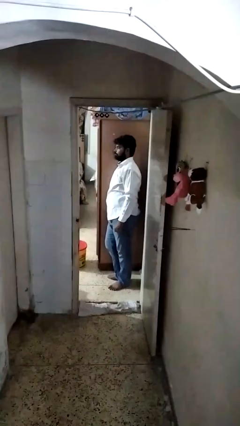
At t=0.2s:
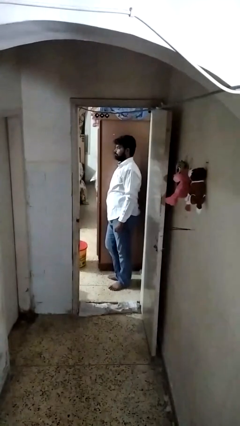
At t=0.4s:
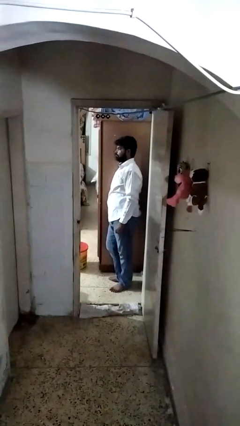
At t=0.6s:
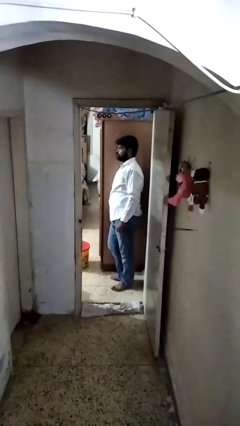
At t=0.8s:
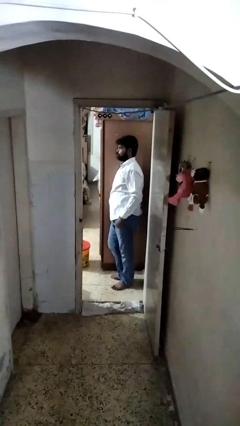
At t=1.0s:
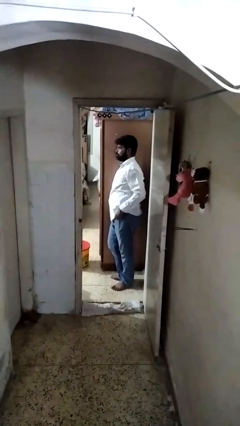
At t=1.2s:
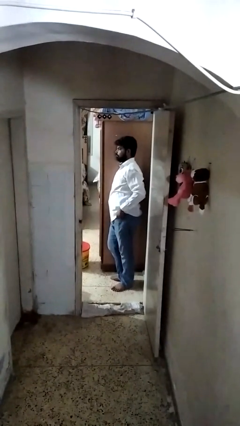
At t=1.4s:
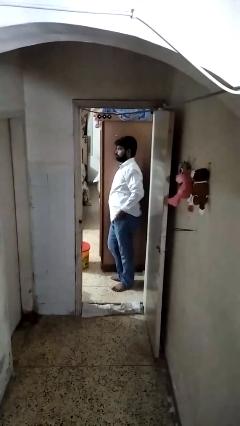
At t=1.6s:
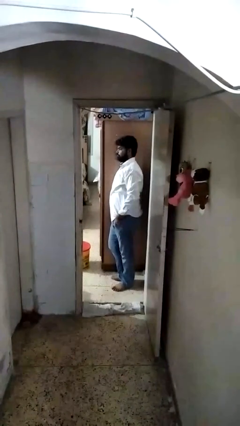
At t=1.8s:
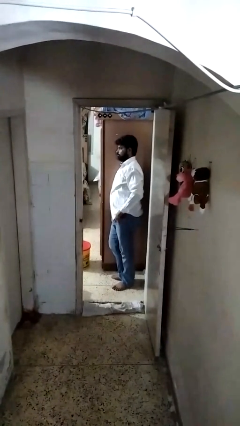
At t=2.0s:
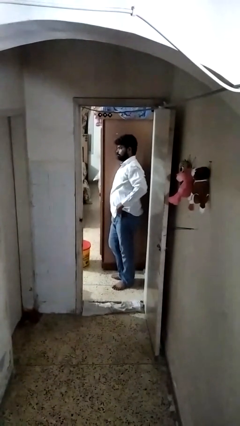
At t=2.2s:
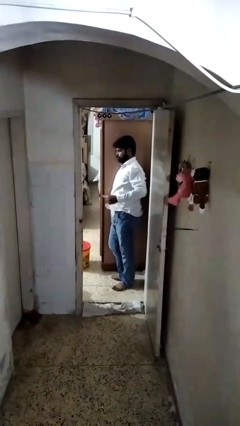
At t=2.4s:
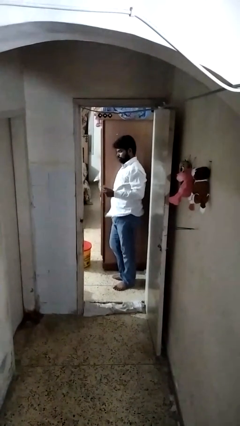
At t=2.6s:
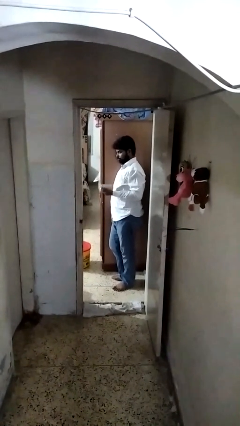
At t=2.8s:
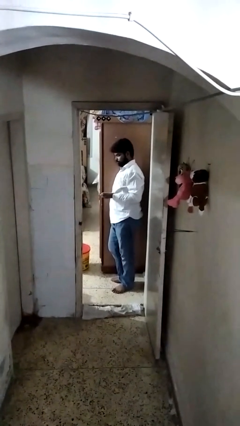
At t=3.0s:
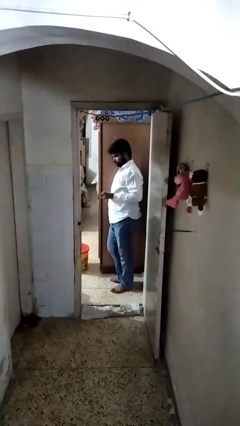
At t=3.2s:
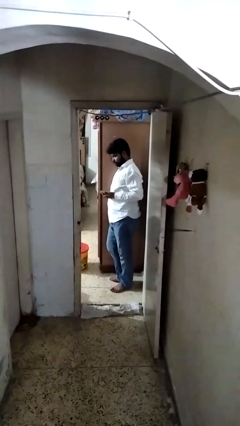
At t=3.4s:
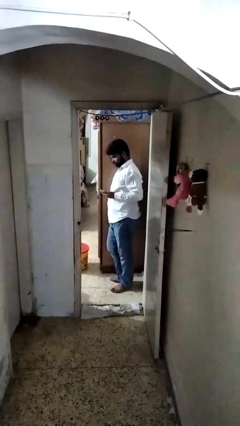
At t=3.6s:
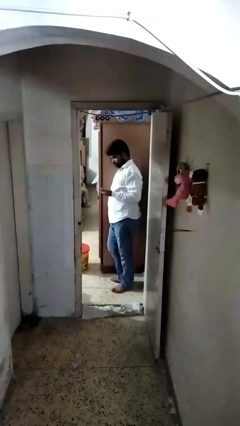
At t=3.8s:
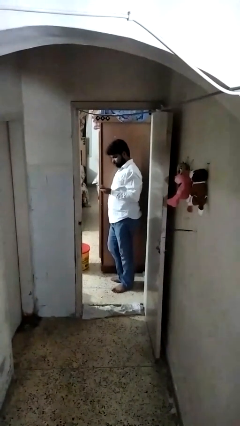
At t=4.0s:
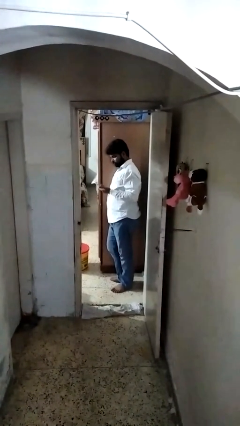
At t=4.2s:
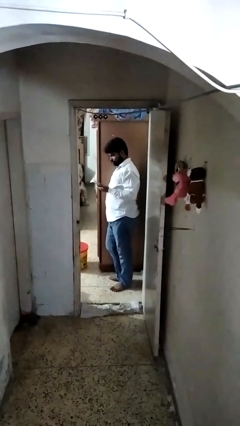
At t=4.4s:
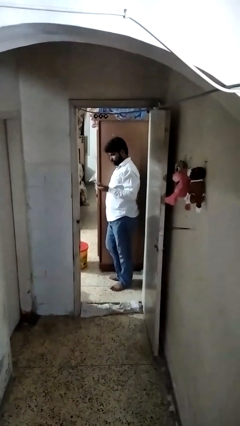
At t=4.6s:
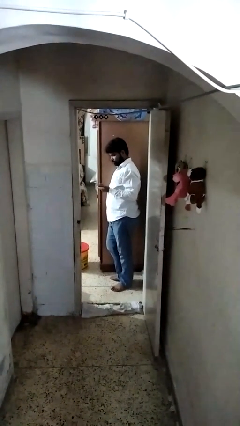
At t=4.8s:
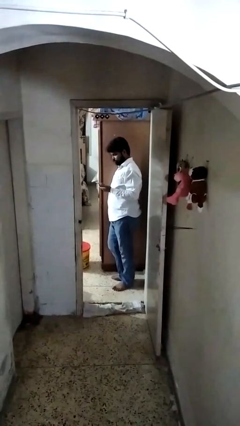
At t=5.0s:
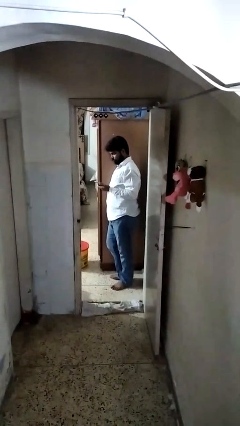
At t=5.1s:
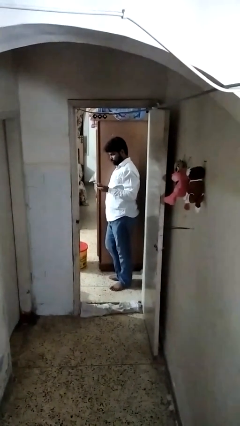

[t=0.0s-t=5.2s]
person takes phone from pocket

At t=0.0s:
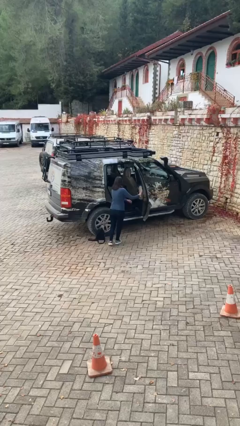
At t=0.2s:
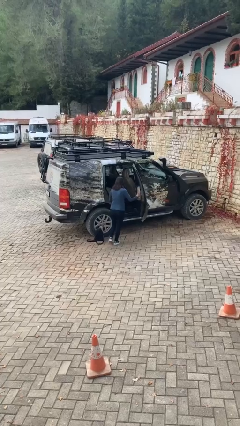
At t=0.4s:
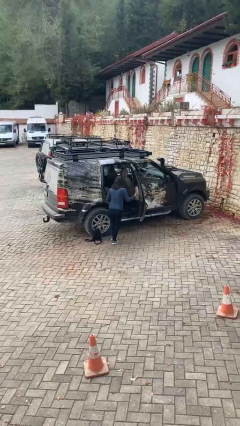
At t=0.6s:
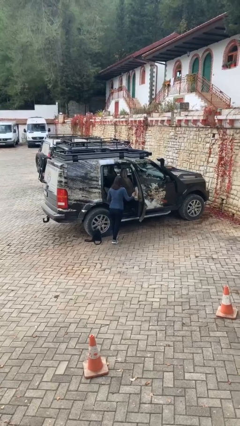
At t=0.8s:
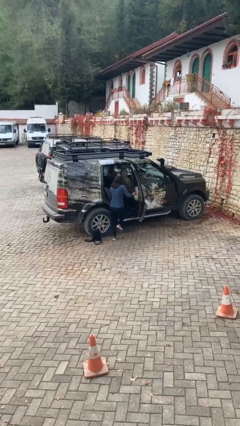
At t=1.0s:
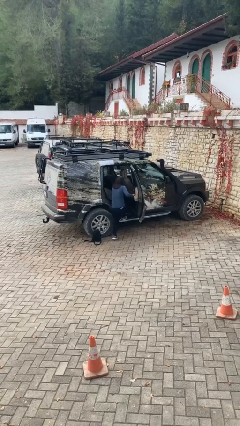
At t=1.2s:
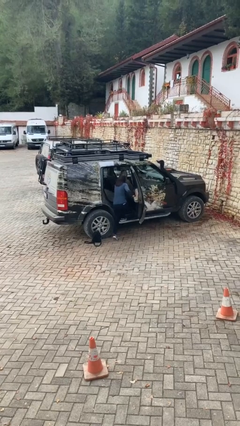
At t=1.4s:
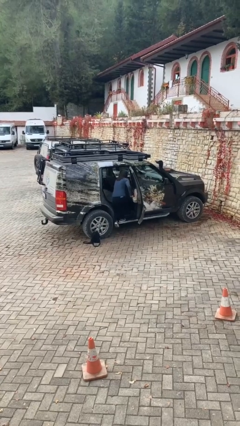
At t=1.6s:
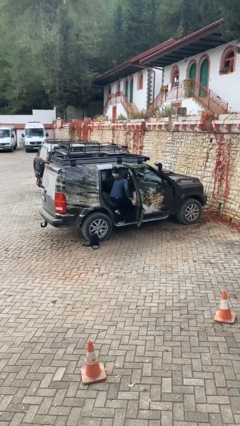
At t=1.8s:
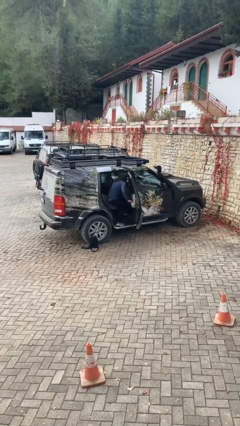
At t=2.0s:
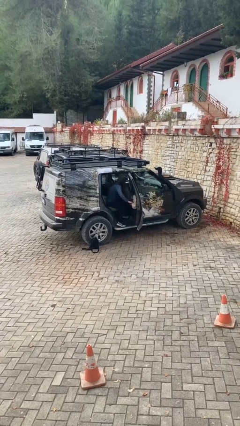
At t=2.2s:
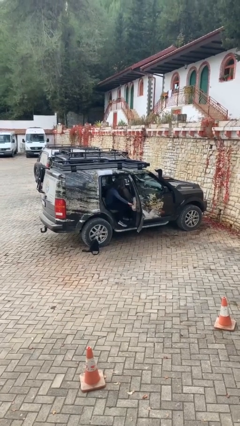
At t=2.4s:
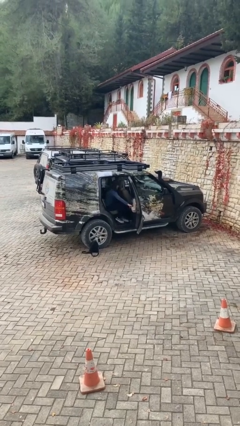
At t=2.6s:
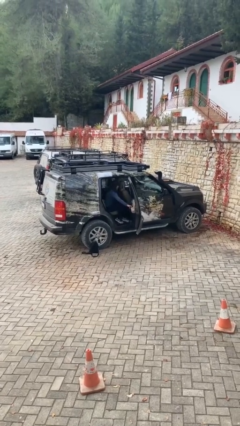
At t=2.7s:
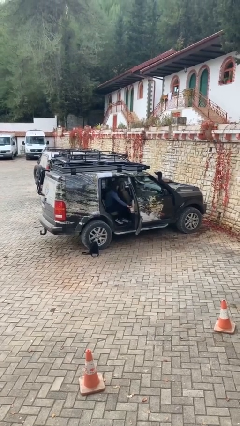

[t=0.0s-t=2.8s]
person enters car

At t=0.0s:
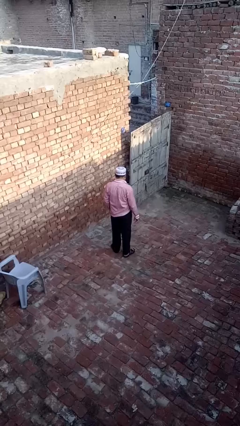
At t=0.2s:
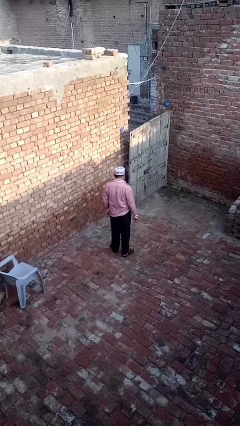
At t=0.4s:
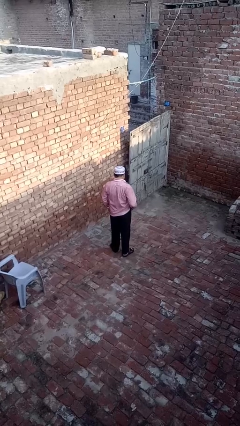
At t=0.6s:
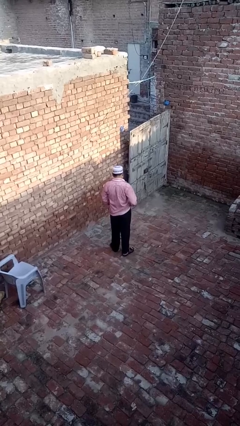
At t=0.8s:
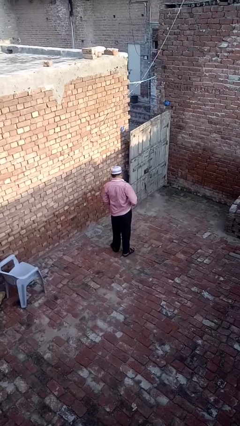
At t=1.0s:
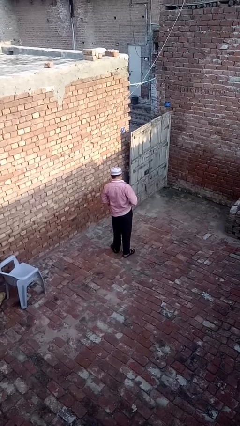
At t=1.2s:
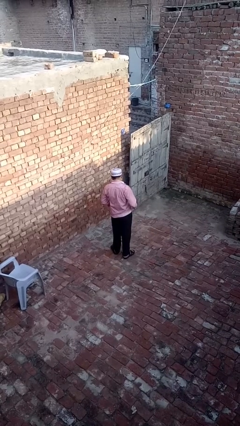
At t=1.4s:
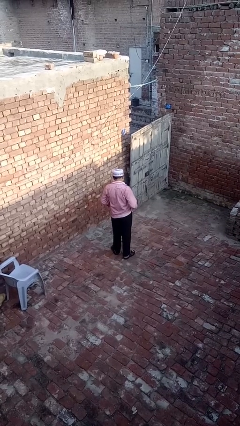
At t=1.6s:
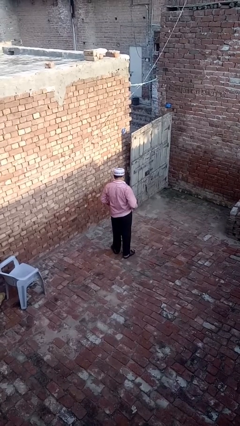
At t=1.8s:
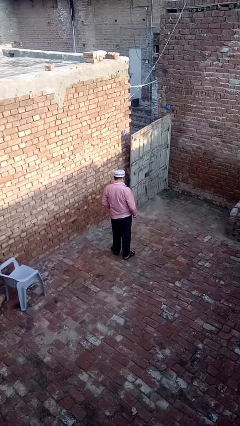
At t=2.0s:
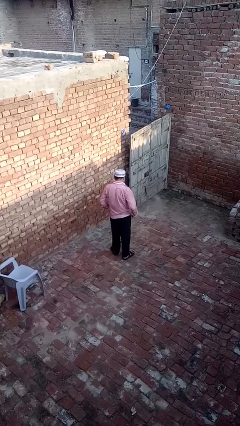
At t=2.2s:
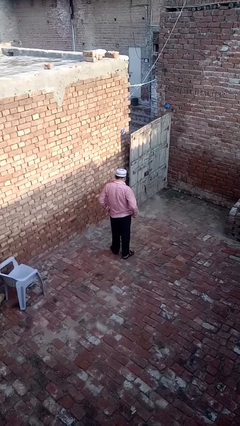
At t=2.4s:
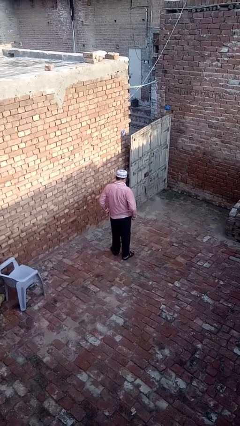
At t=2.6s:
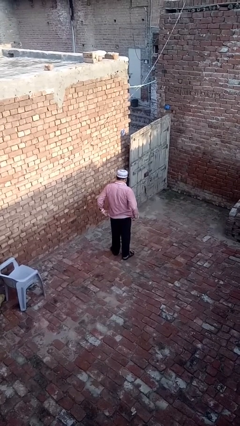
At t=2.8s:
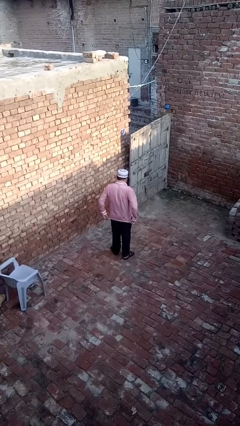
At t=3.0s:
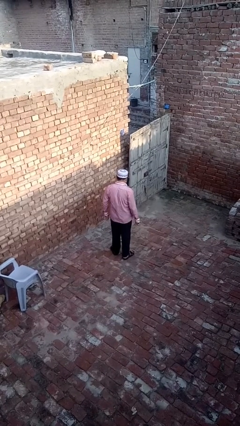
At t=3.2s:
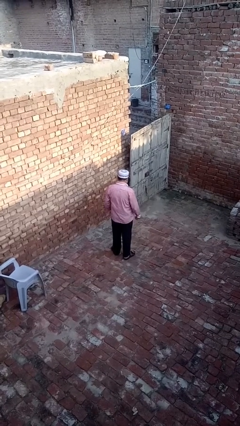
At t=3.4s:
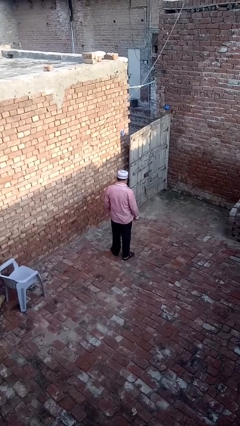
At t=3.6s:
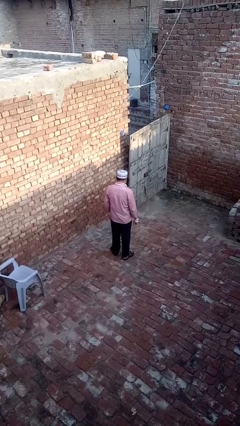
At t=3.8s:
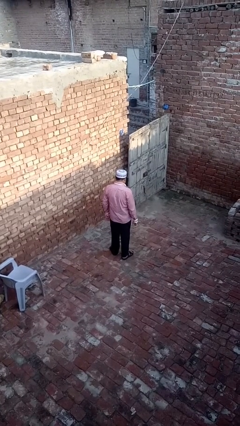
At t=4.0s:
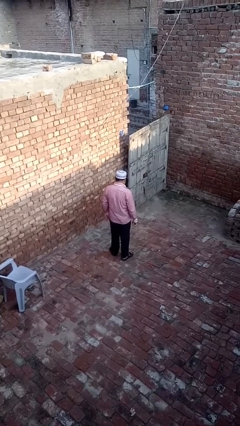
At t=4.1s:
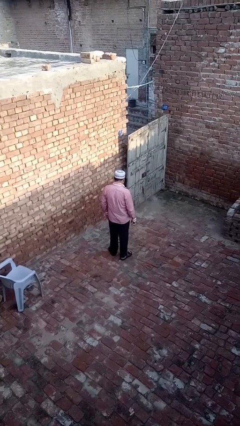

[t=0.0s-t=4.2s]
person untucks shirt

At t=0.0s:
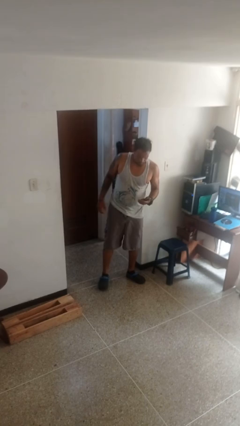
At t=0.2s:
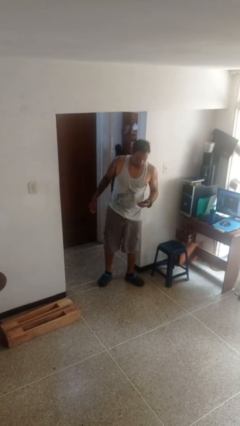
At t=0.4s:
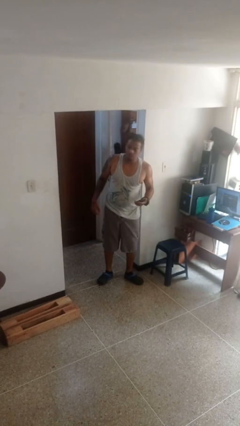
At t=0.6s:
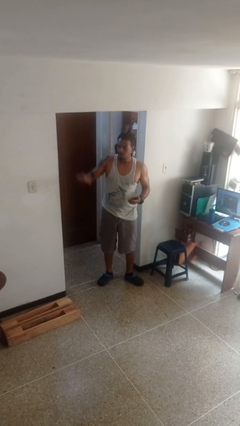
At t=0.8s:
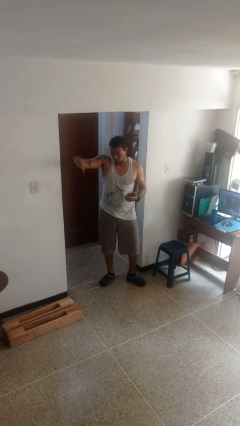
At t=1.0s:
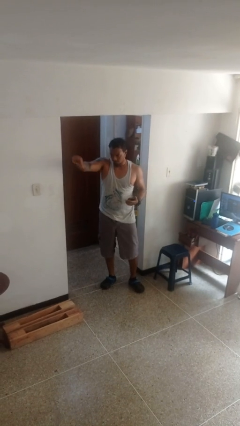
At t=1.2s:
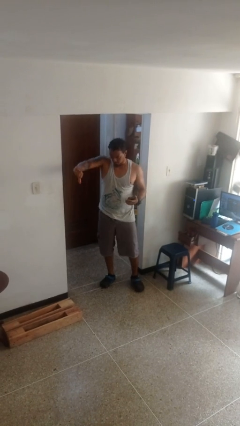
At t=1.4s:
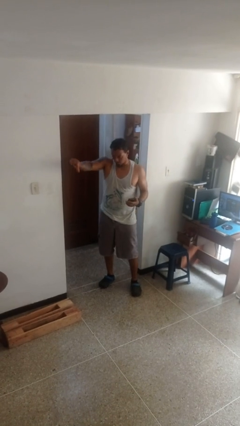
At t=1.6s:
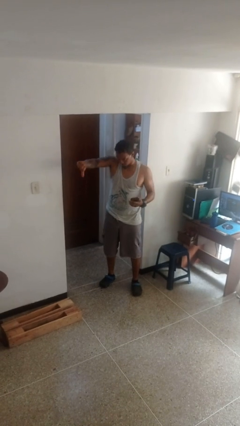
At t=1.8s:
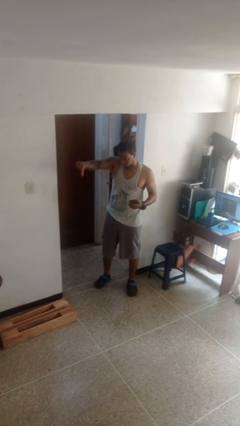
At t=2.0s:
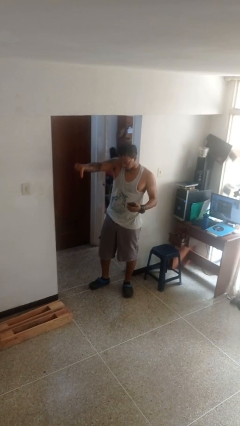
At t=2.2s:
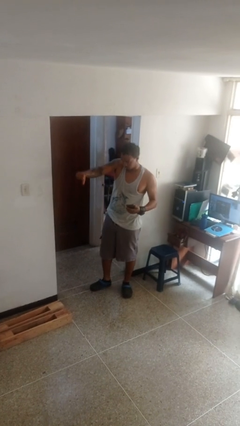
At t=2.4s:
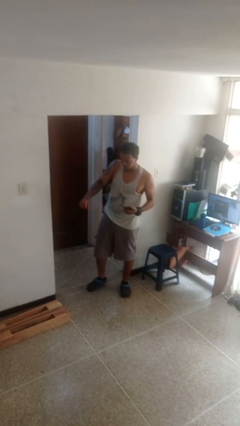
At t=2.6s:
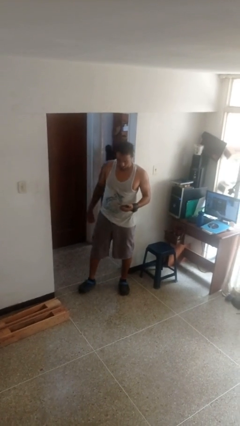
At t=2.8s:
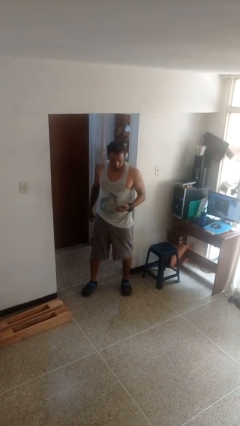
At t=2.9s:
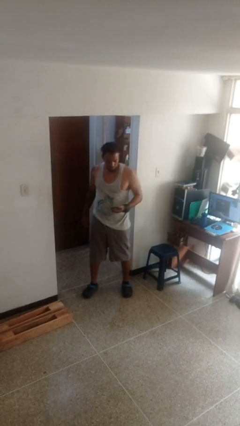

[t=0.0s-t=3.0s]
person gestures thumbs down

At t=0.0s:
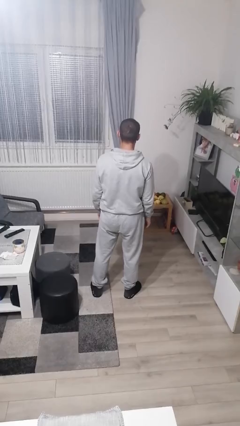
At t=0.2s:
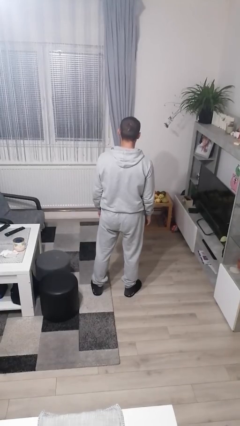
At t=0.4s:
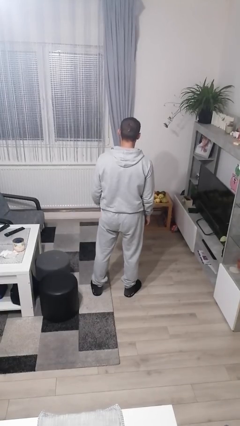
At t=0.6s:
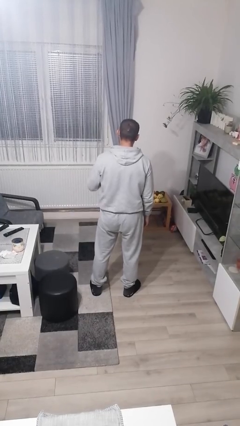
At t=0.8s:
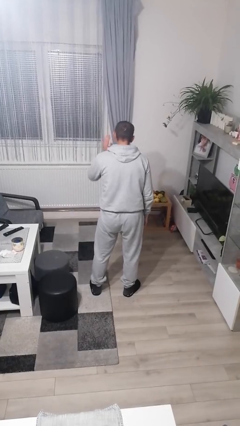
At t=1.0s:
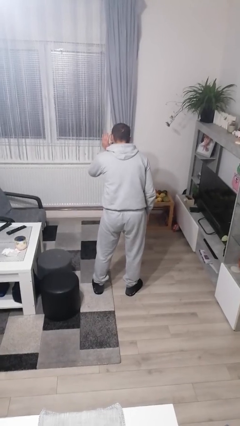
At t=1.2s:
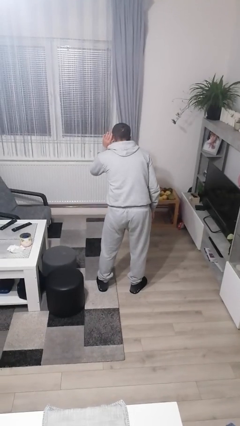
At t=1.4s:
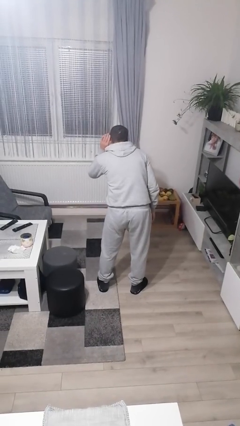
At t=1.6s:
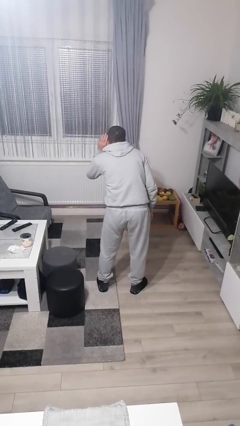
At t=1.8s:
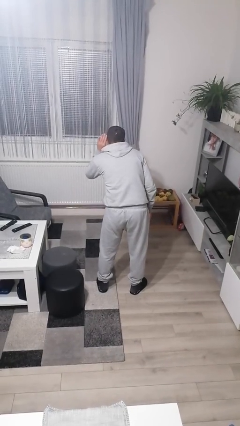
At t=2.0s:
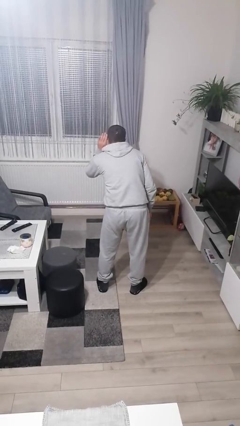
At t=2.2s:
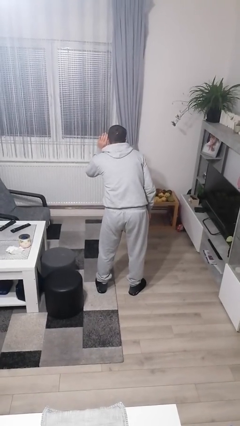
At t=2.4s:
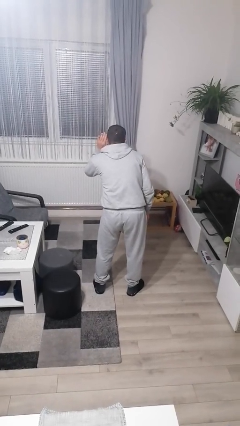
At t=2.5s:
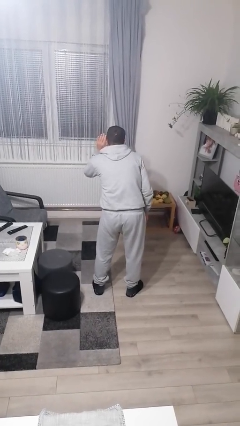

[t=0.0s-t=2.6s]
person gestures listen closely

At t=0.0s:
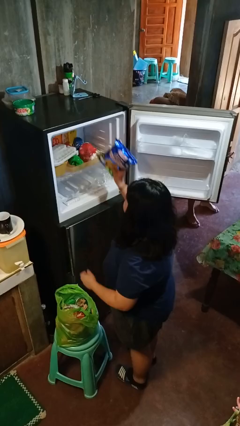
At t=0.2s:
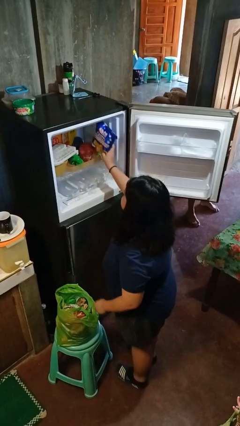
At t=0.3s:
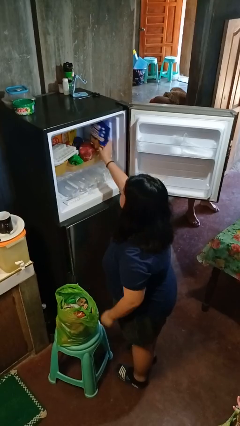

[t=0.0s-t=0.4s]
person loads groceries into refrigerator
